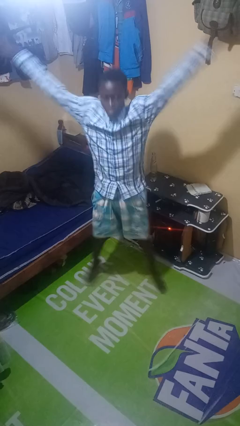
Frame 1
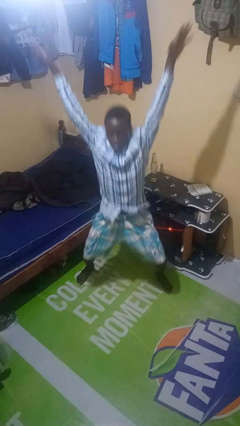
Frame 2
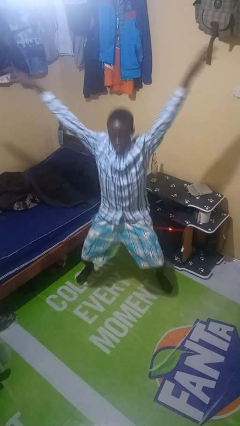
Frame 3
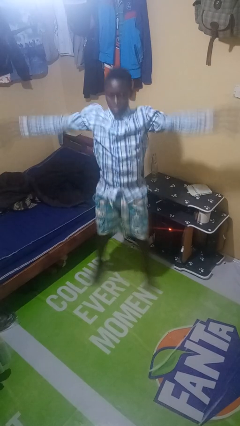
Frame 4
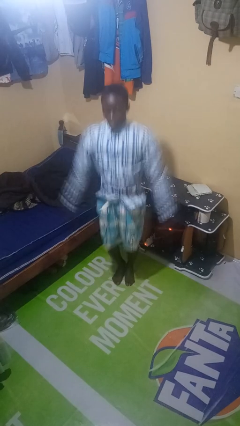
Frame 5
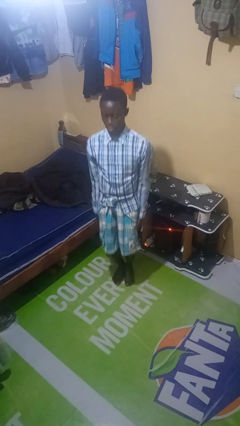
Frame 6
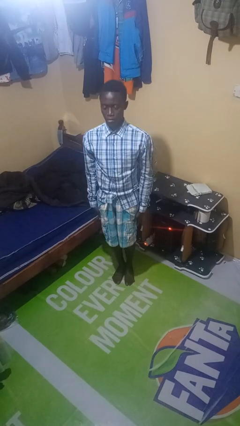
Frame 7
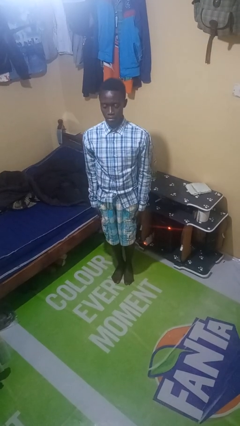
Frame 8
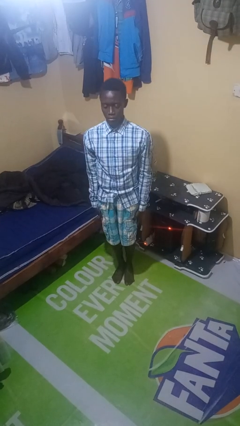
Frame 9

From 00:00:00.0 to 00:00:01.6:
person exercises with jumping jacks

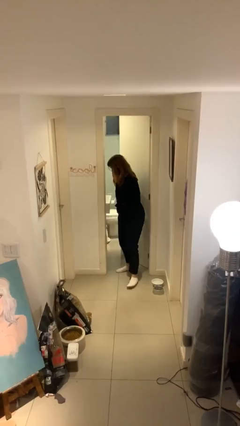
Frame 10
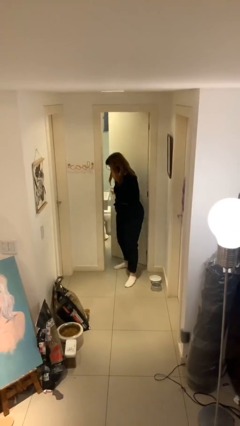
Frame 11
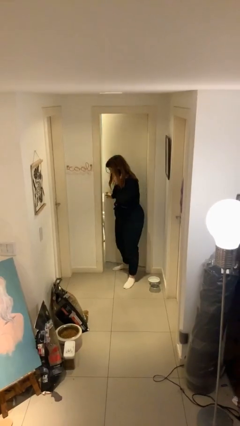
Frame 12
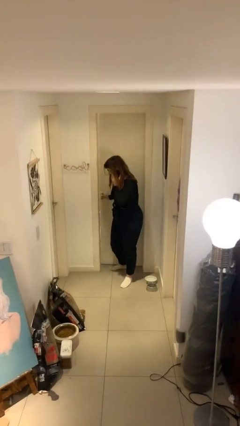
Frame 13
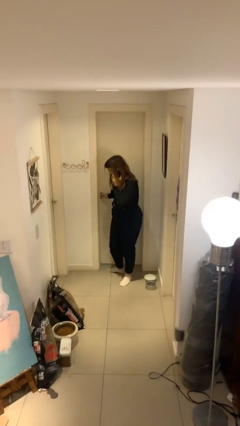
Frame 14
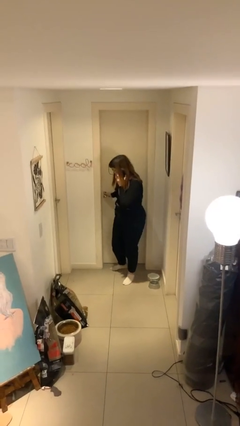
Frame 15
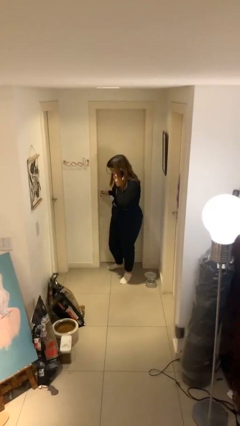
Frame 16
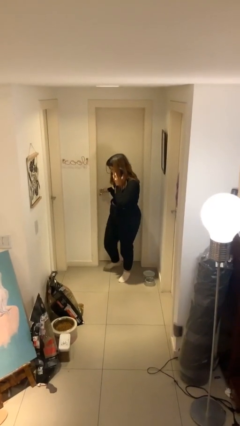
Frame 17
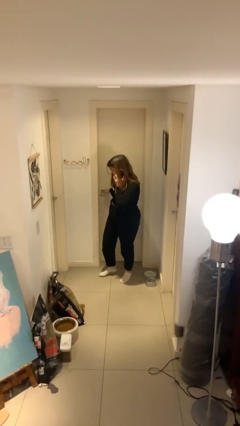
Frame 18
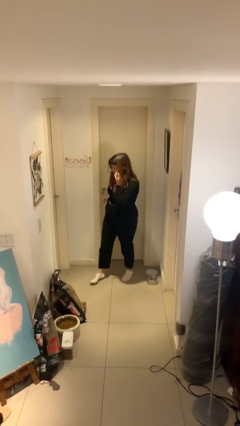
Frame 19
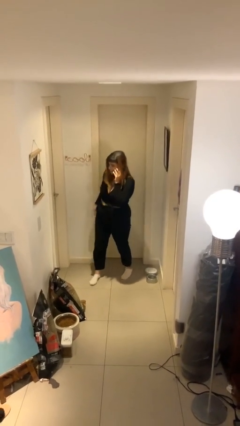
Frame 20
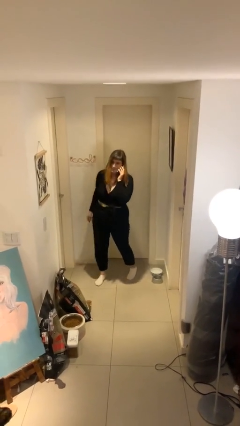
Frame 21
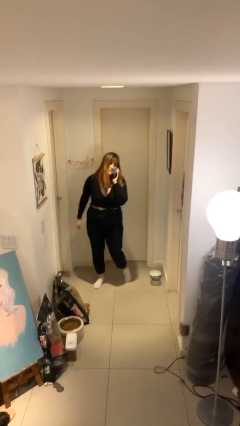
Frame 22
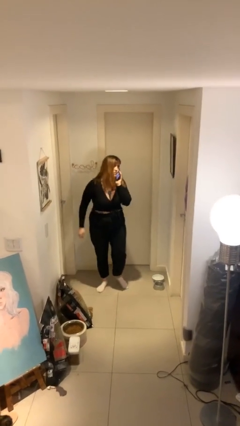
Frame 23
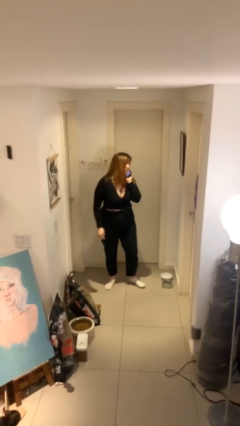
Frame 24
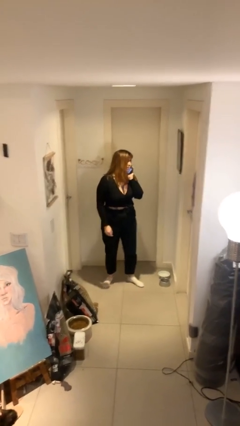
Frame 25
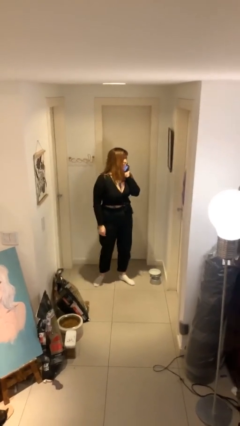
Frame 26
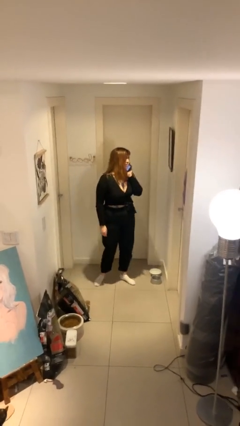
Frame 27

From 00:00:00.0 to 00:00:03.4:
person closes facility door

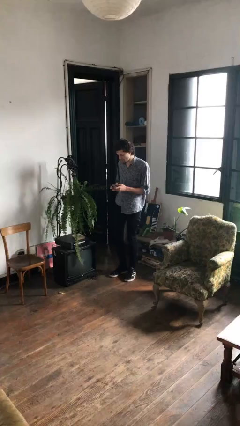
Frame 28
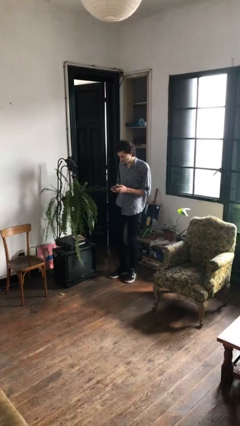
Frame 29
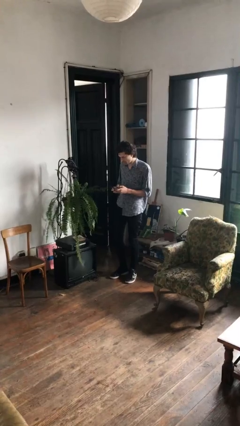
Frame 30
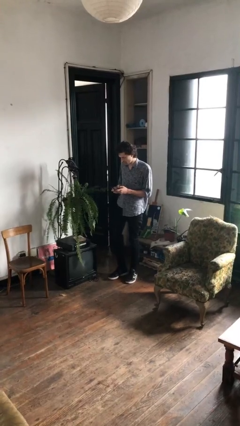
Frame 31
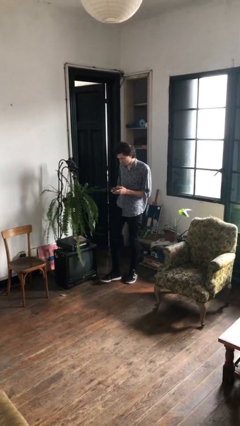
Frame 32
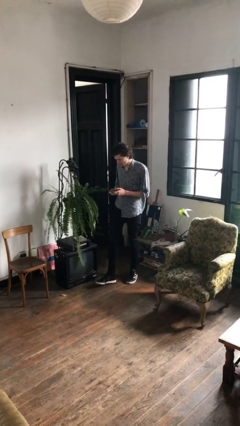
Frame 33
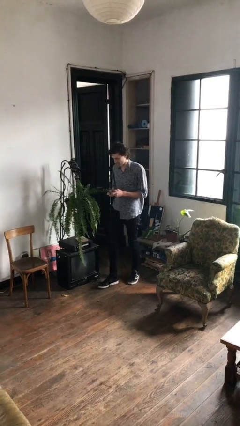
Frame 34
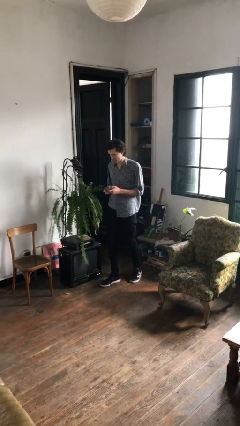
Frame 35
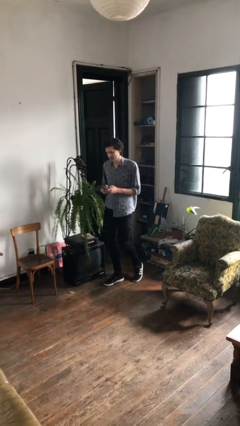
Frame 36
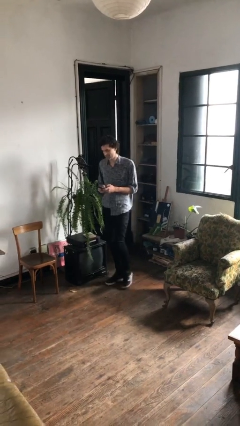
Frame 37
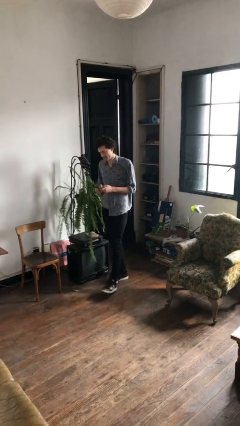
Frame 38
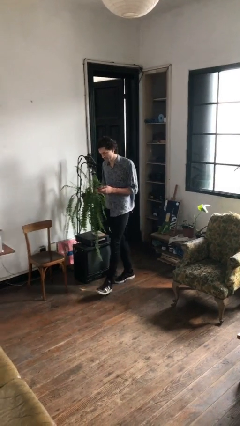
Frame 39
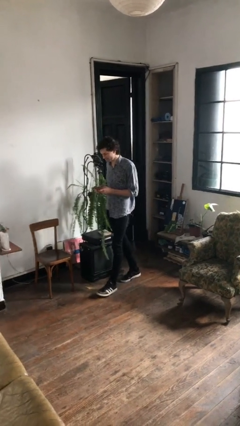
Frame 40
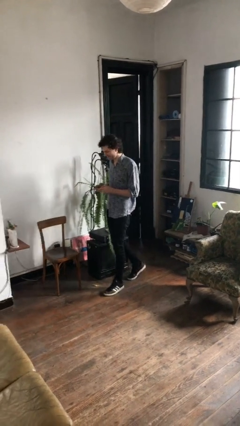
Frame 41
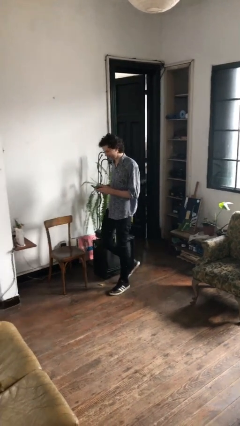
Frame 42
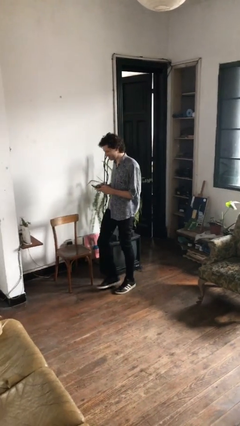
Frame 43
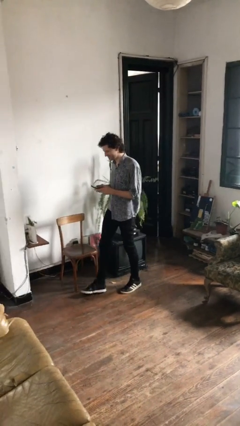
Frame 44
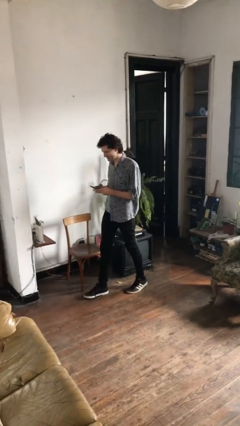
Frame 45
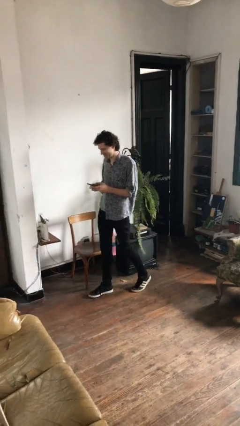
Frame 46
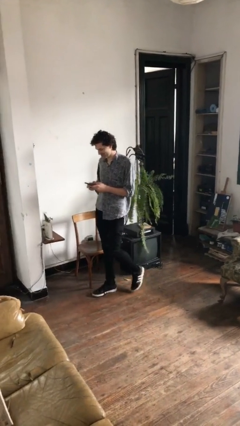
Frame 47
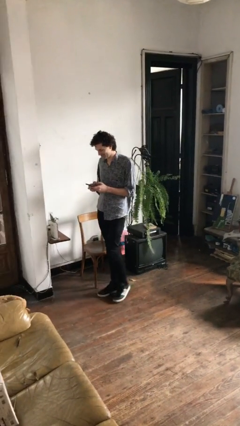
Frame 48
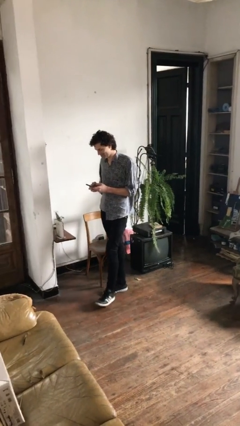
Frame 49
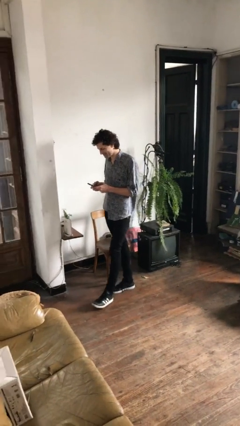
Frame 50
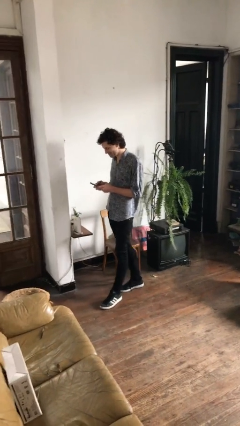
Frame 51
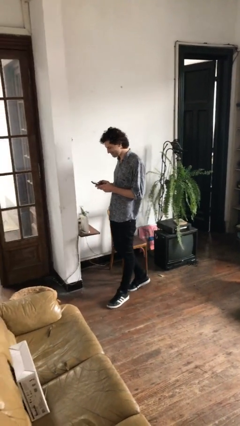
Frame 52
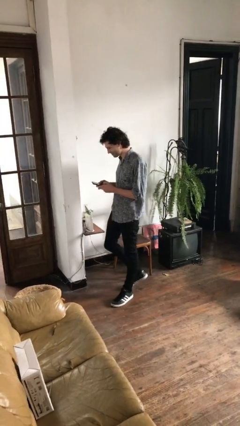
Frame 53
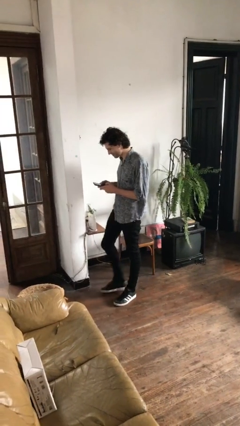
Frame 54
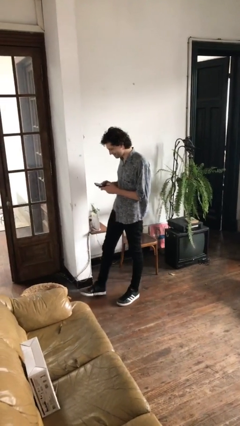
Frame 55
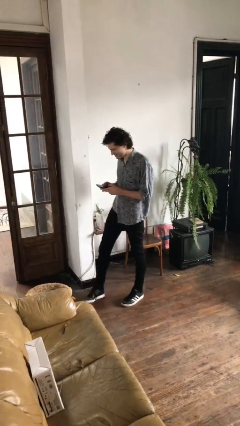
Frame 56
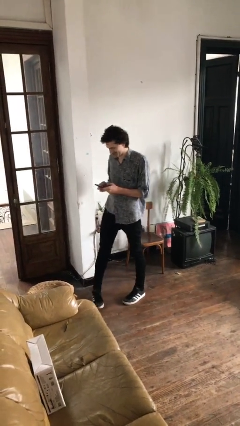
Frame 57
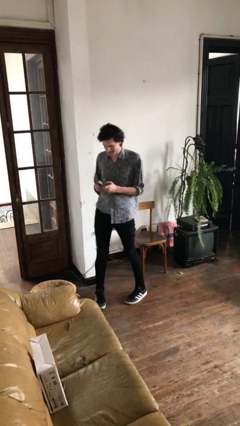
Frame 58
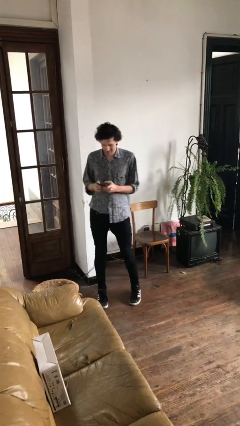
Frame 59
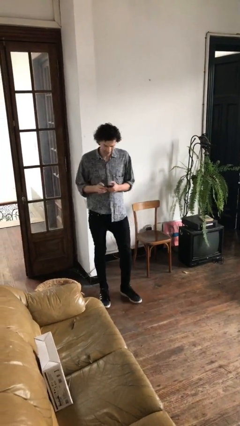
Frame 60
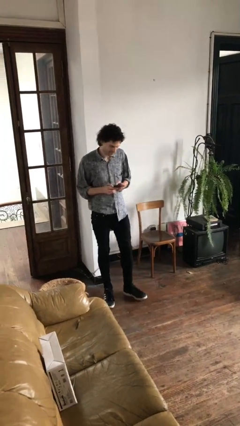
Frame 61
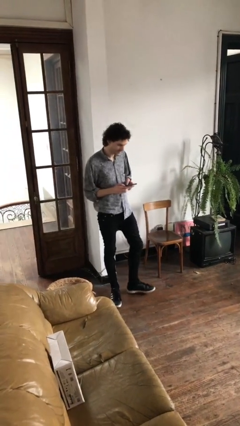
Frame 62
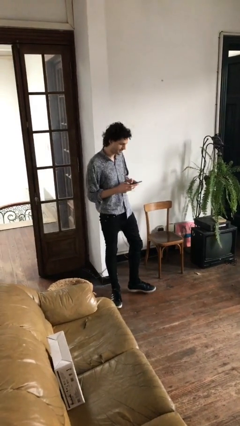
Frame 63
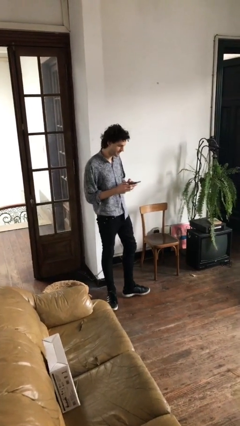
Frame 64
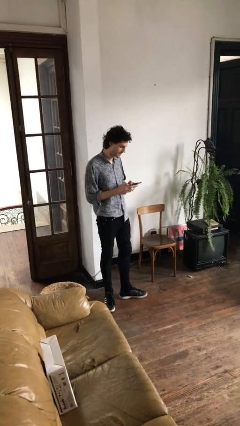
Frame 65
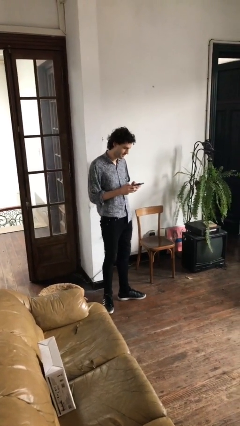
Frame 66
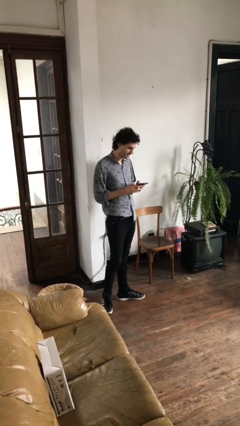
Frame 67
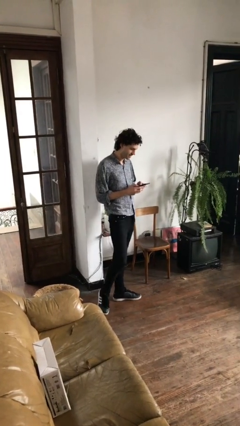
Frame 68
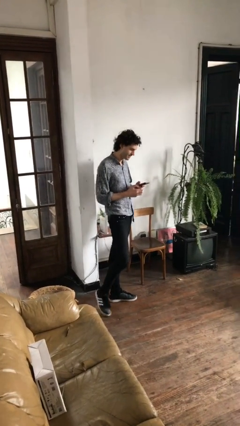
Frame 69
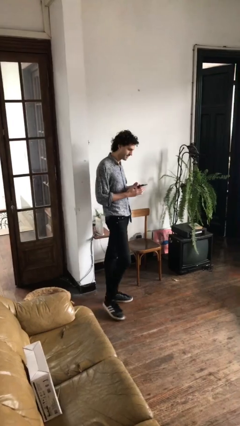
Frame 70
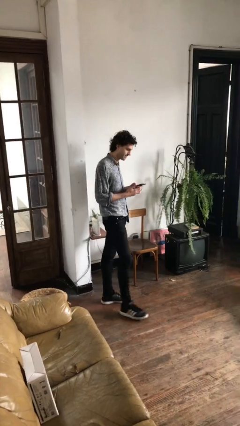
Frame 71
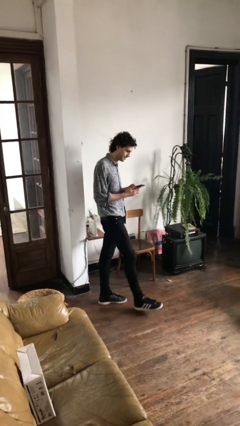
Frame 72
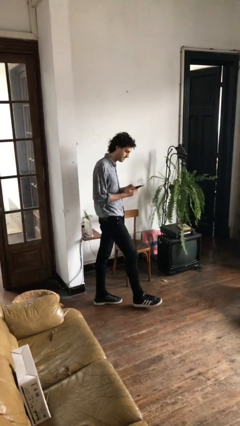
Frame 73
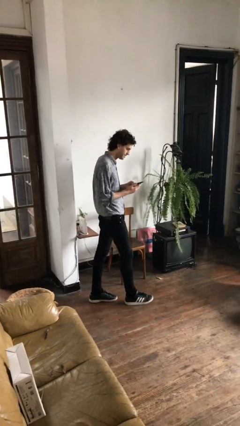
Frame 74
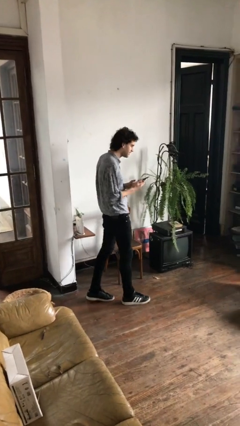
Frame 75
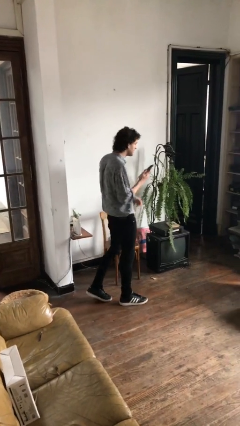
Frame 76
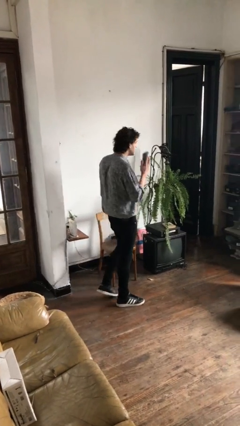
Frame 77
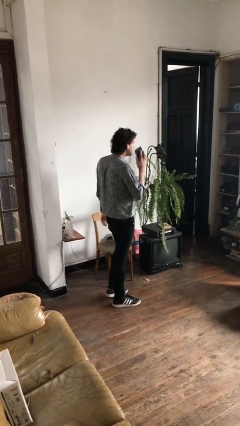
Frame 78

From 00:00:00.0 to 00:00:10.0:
person texts on phone

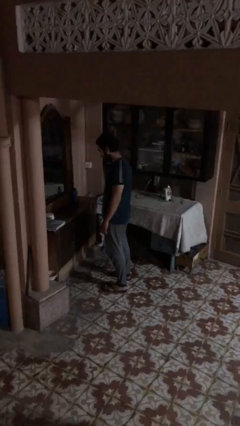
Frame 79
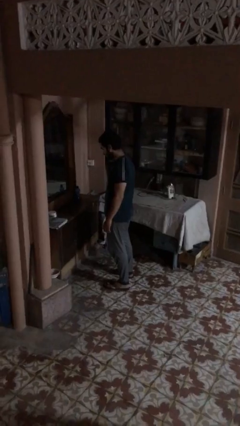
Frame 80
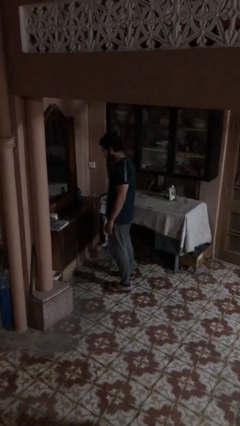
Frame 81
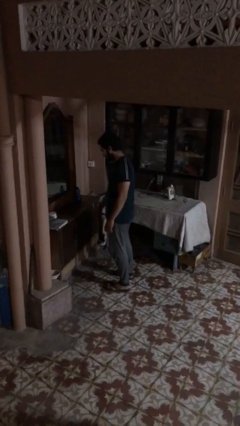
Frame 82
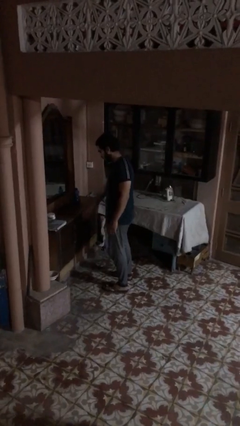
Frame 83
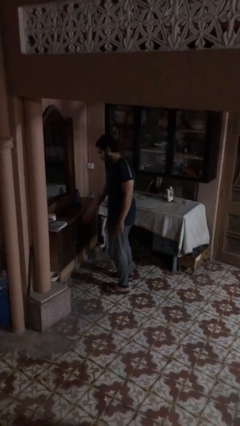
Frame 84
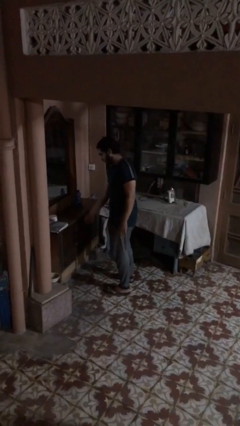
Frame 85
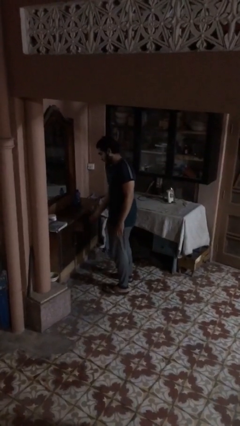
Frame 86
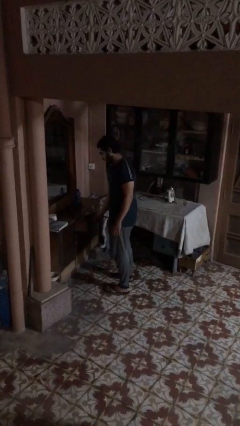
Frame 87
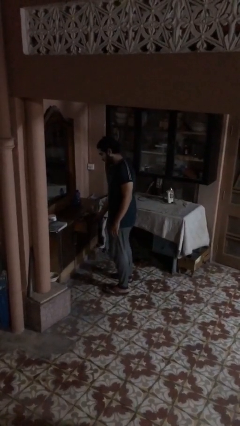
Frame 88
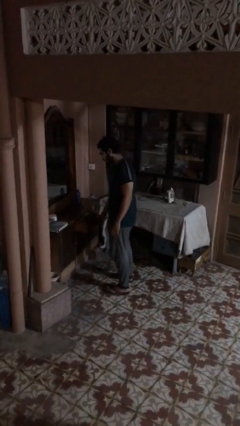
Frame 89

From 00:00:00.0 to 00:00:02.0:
person opens dresser drawer

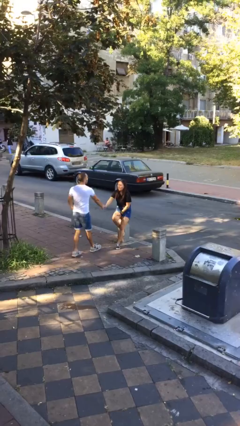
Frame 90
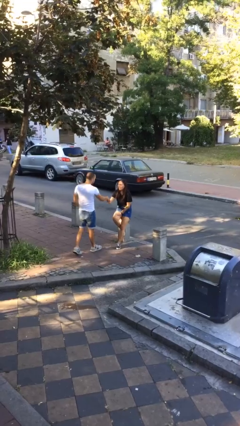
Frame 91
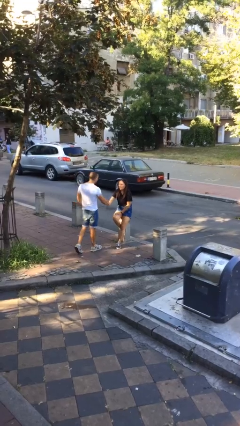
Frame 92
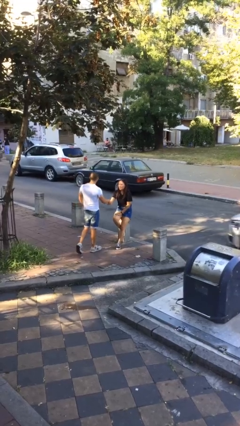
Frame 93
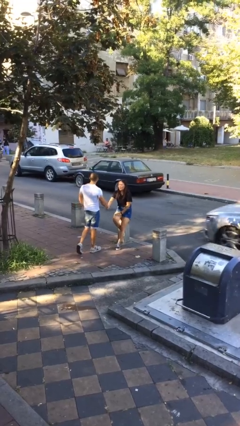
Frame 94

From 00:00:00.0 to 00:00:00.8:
person shakes hand
